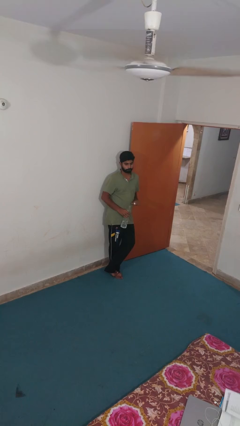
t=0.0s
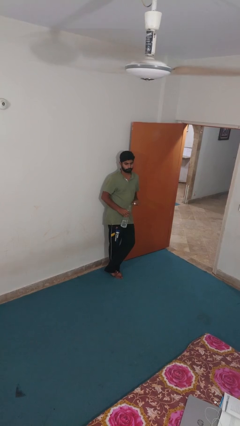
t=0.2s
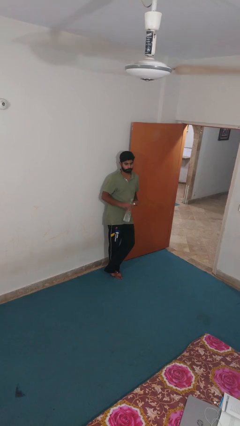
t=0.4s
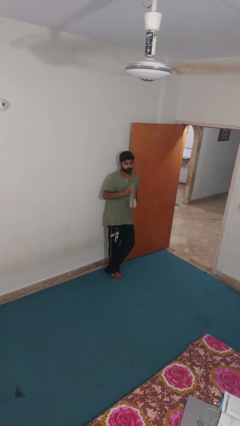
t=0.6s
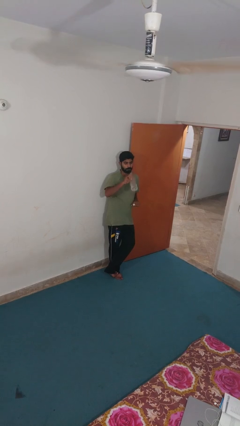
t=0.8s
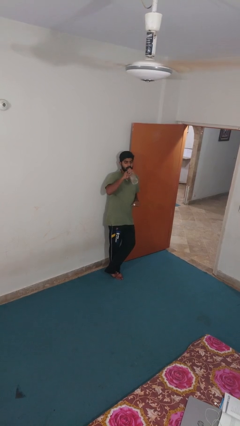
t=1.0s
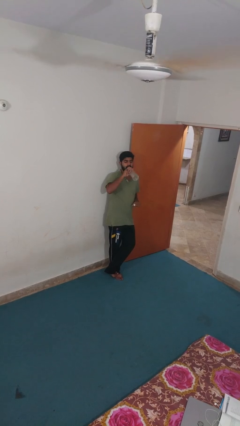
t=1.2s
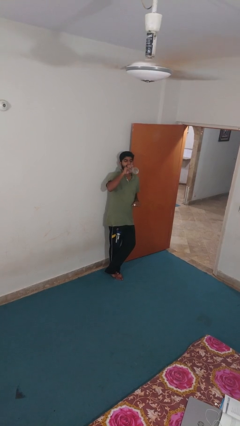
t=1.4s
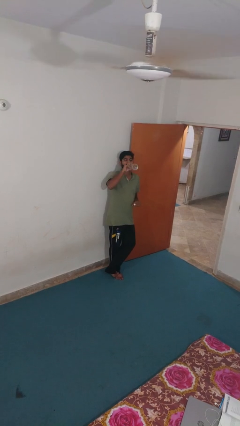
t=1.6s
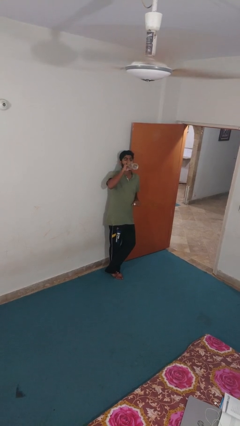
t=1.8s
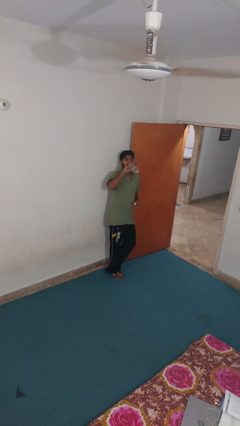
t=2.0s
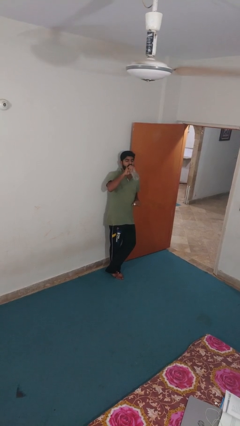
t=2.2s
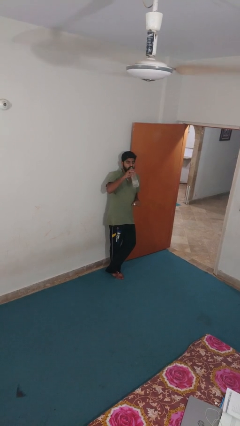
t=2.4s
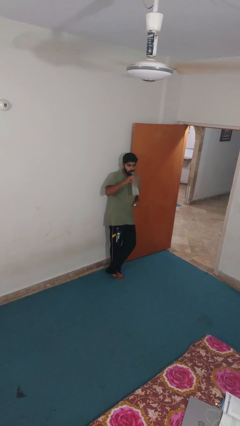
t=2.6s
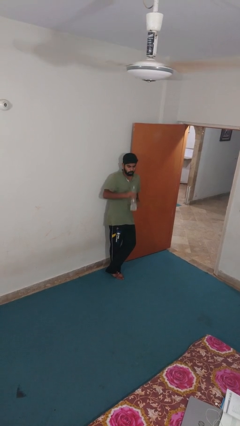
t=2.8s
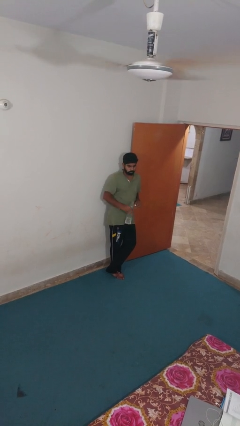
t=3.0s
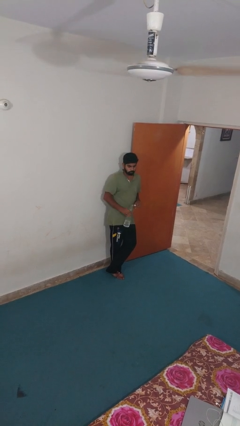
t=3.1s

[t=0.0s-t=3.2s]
person drinks from bottle

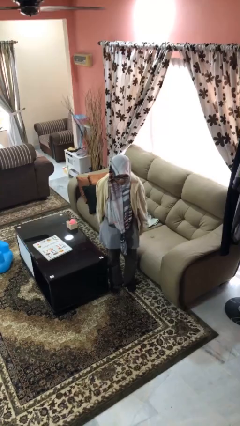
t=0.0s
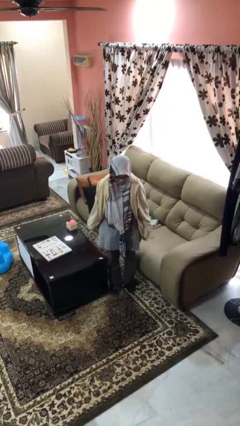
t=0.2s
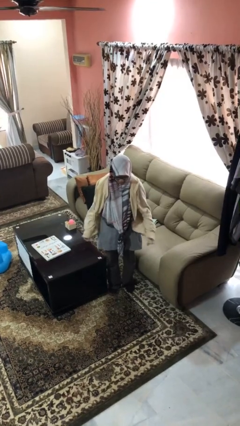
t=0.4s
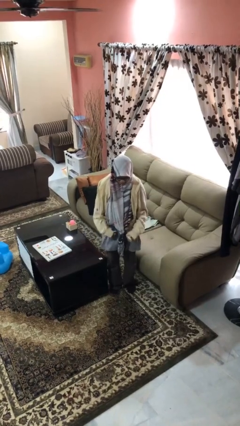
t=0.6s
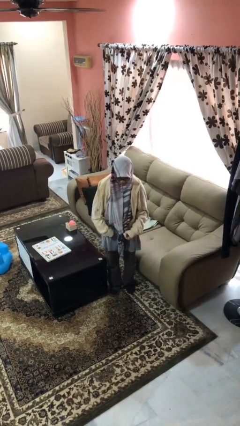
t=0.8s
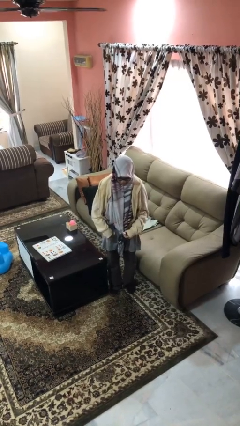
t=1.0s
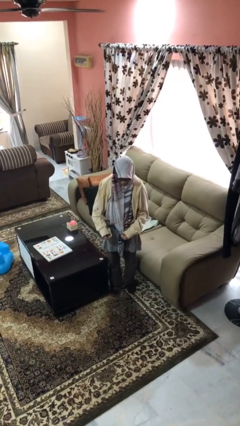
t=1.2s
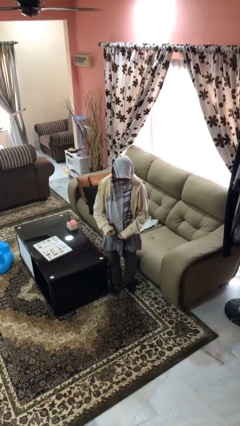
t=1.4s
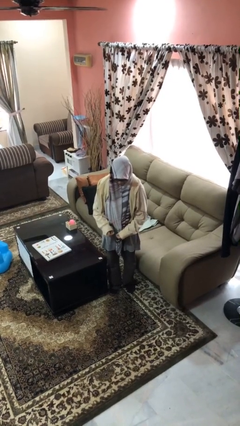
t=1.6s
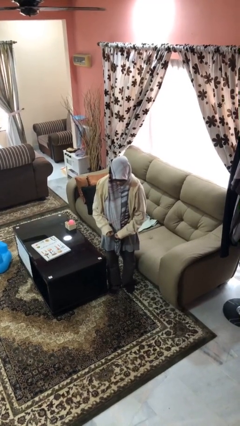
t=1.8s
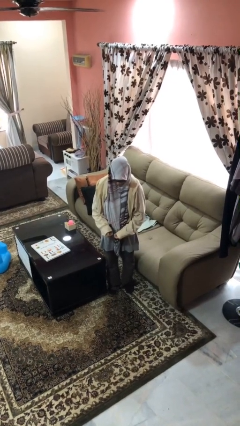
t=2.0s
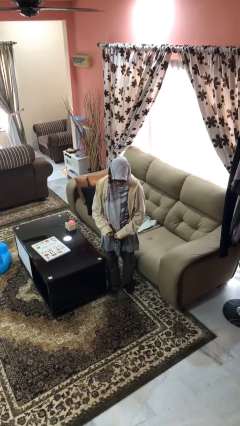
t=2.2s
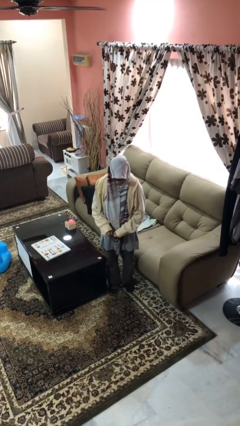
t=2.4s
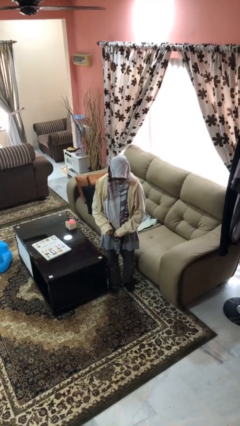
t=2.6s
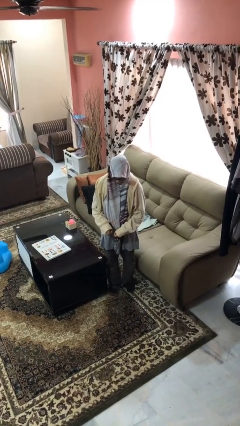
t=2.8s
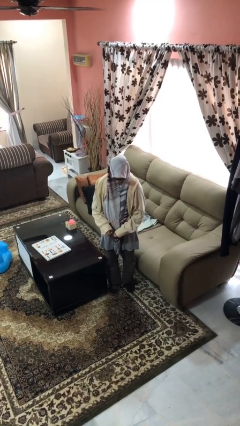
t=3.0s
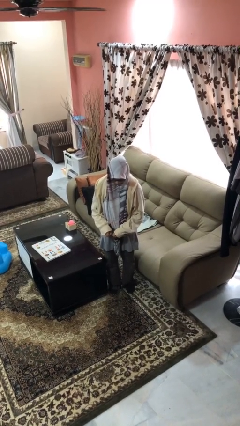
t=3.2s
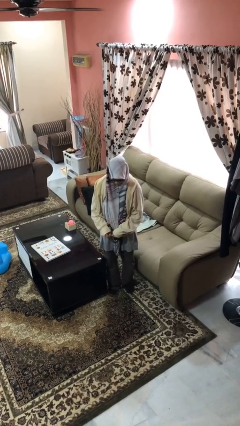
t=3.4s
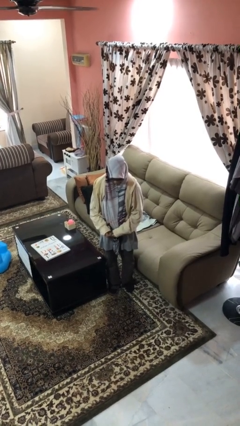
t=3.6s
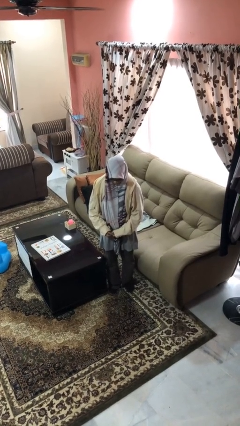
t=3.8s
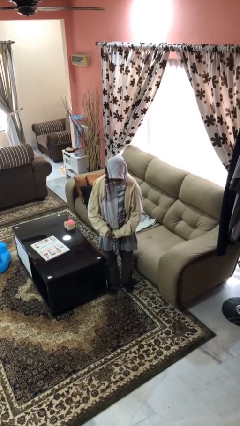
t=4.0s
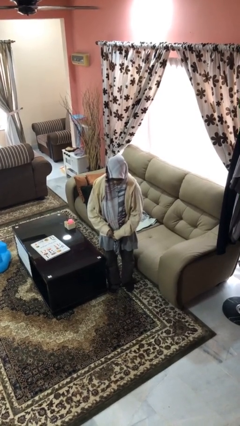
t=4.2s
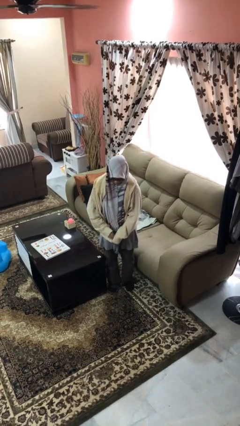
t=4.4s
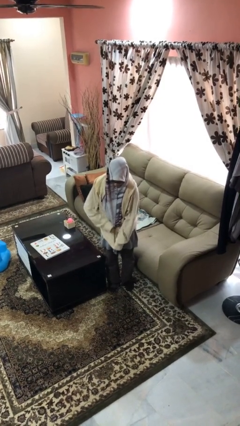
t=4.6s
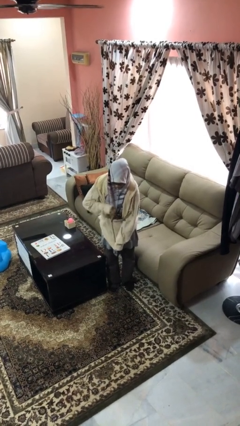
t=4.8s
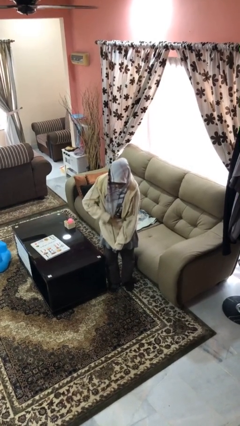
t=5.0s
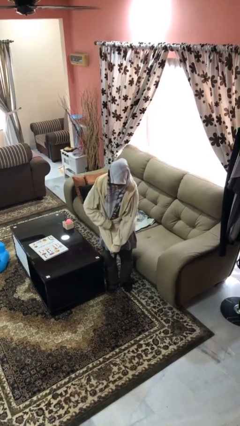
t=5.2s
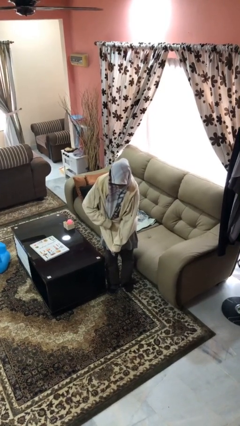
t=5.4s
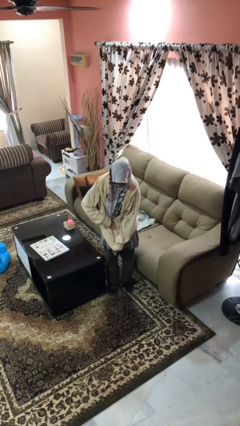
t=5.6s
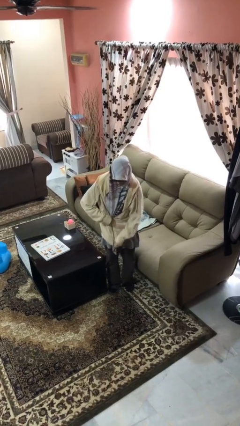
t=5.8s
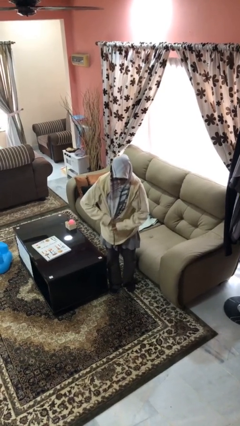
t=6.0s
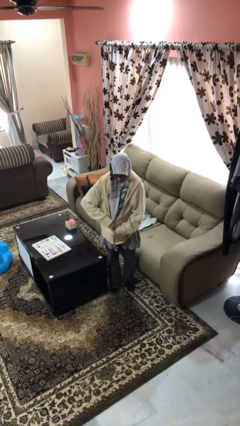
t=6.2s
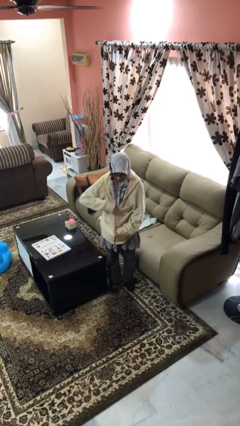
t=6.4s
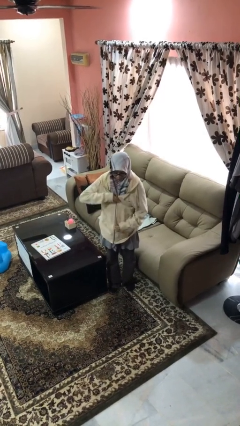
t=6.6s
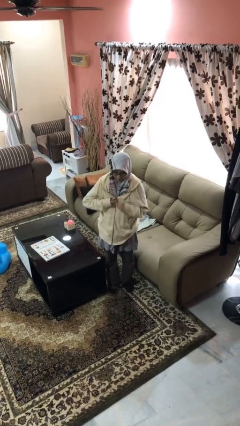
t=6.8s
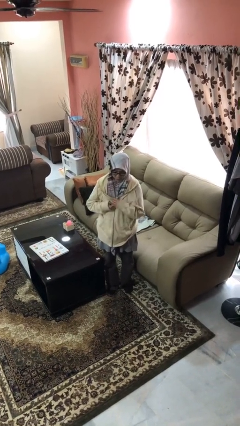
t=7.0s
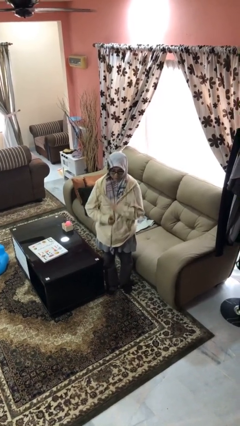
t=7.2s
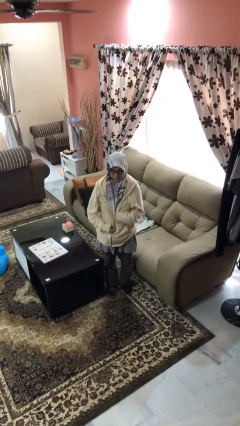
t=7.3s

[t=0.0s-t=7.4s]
person zips up jacket

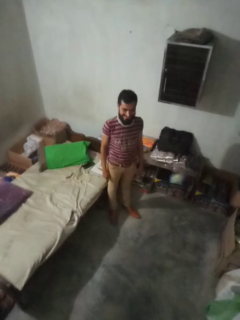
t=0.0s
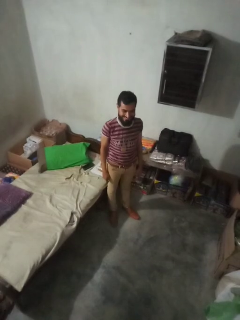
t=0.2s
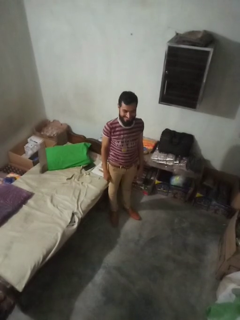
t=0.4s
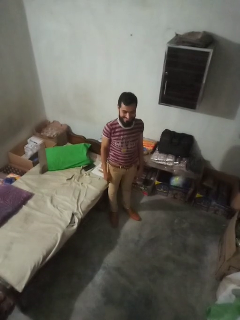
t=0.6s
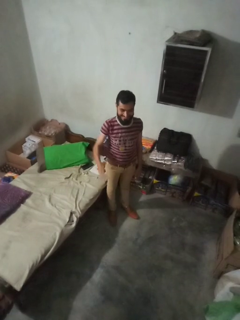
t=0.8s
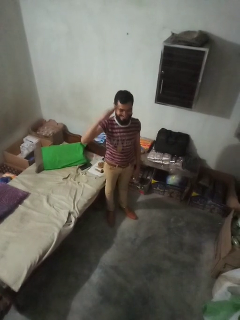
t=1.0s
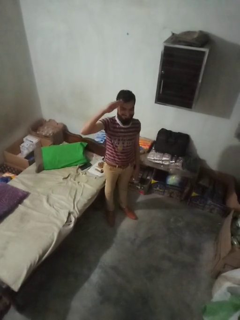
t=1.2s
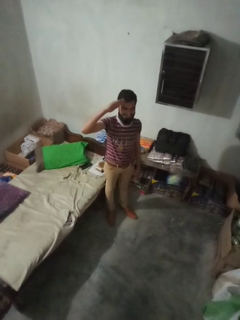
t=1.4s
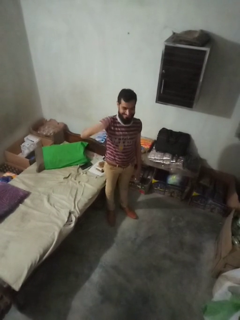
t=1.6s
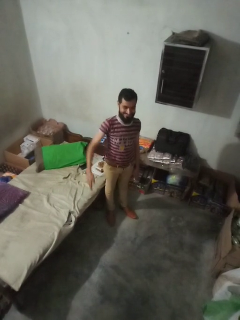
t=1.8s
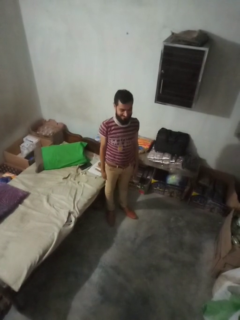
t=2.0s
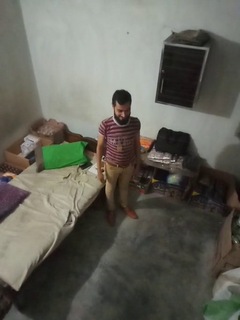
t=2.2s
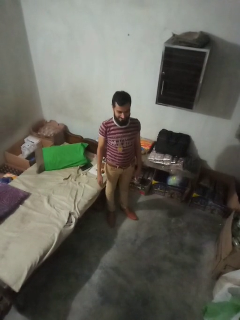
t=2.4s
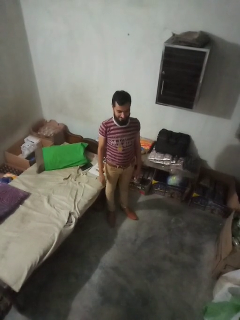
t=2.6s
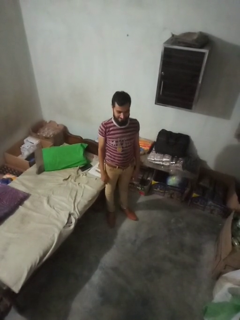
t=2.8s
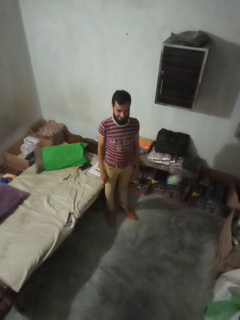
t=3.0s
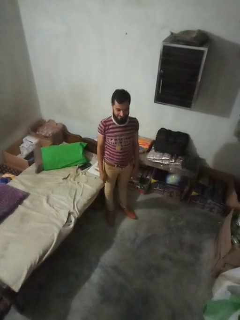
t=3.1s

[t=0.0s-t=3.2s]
person salutes

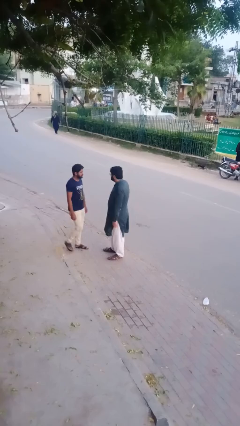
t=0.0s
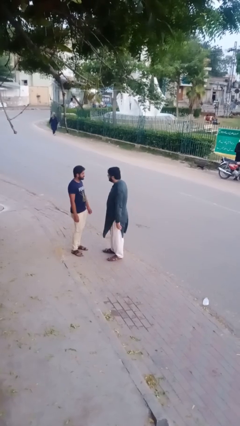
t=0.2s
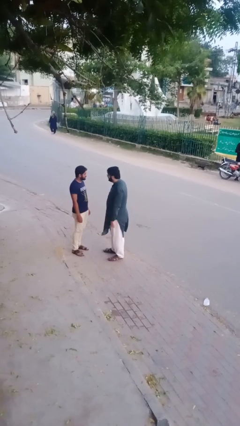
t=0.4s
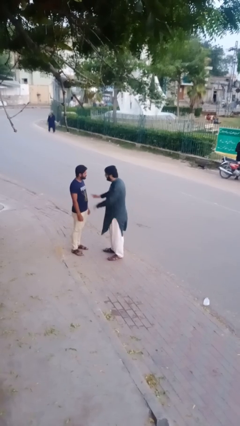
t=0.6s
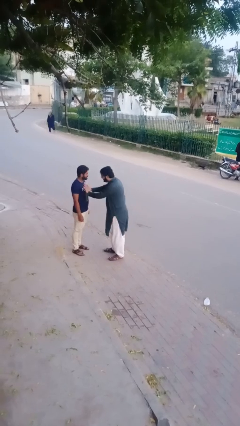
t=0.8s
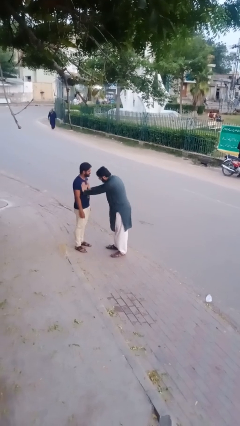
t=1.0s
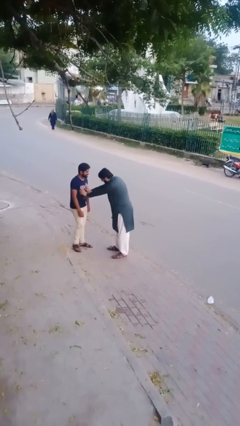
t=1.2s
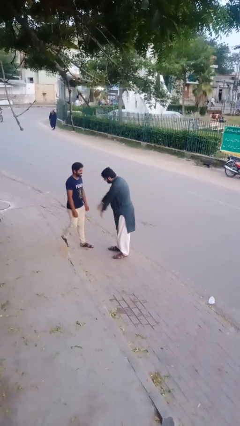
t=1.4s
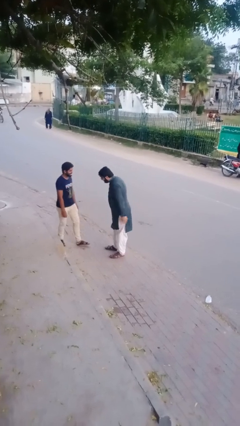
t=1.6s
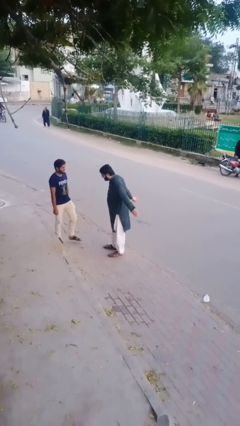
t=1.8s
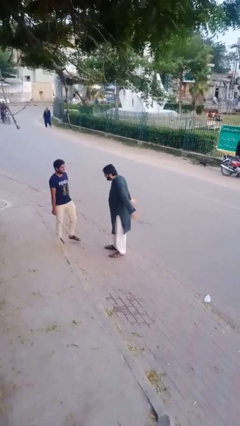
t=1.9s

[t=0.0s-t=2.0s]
person shoves person

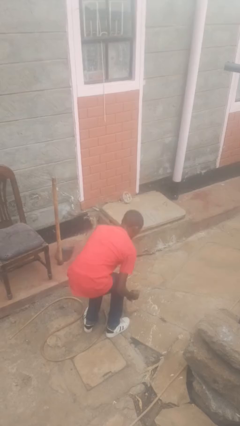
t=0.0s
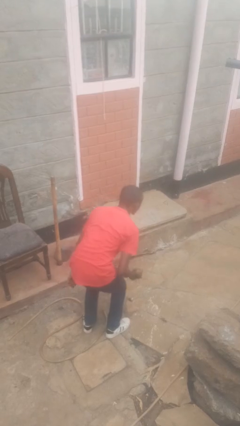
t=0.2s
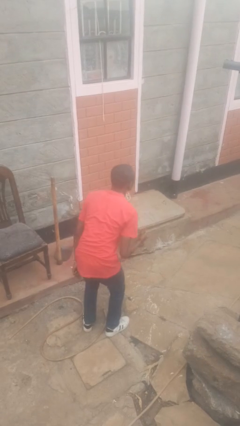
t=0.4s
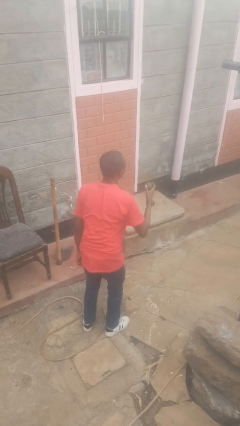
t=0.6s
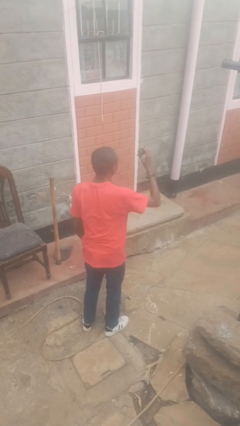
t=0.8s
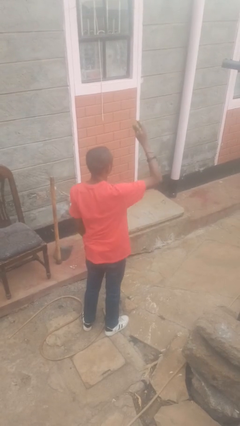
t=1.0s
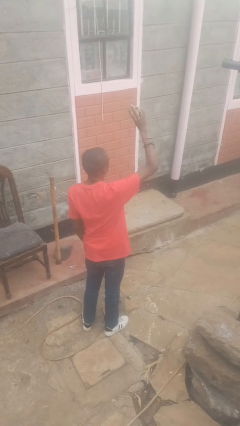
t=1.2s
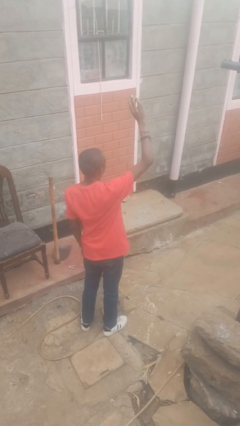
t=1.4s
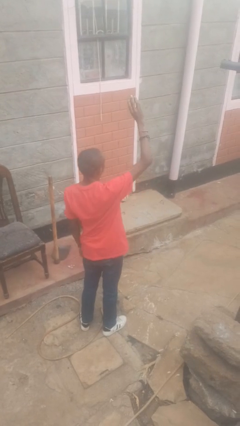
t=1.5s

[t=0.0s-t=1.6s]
person catches dropped object

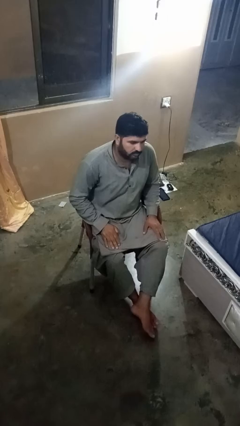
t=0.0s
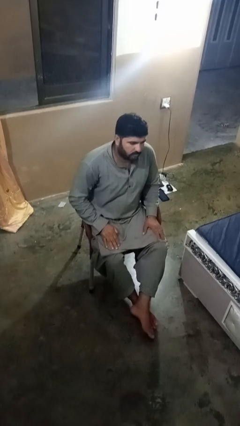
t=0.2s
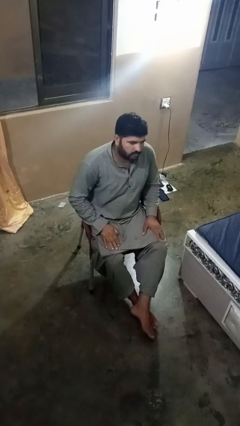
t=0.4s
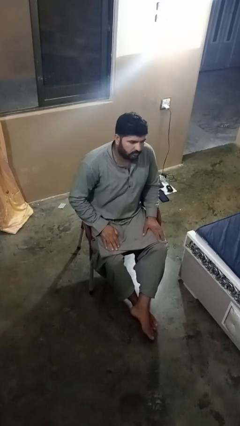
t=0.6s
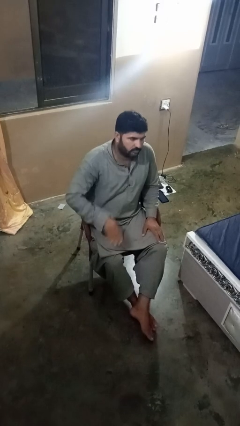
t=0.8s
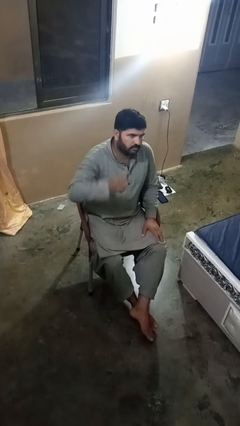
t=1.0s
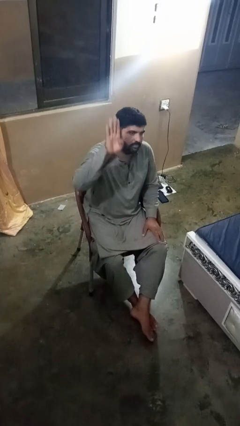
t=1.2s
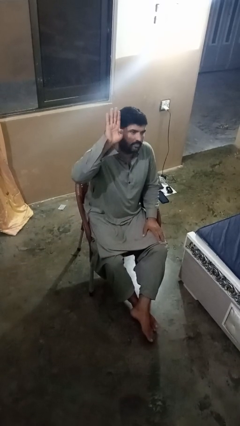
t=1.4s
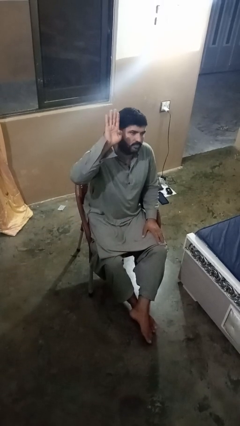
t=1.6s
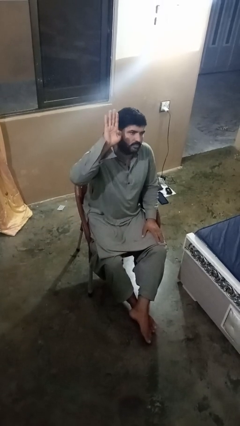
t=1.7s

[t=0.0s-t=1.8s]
person gestures number four
